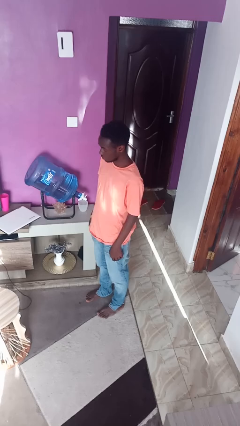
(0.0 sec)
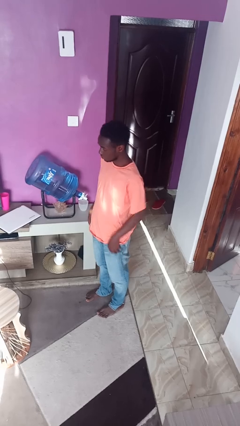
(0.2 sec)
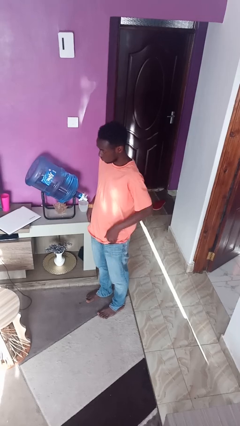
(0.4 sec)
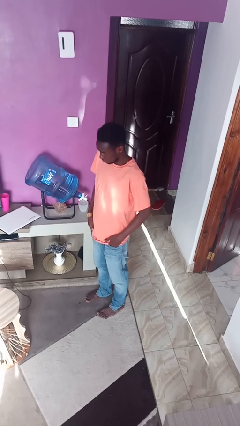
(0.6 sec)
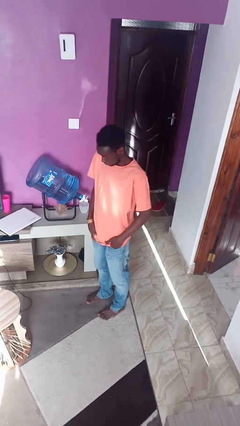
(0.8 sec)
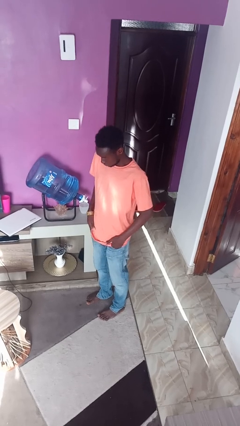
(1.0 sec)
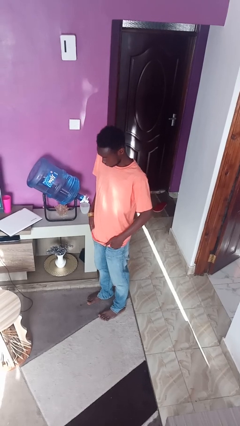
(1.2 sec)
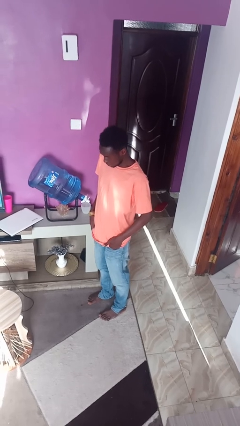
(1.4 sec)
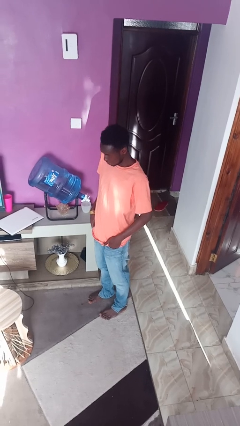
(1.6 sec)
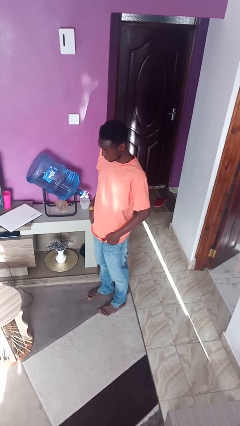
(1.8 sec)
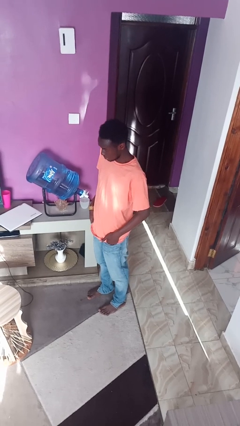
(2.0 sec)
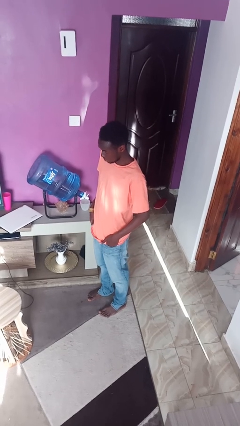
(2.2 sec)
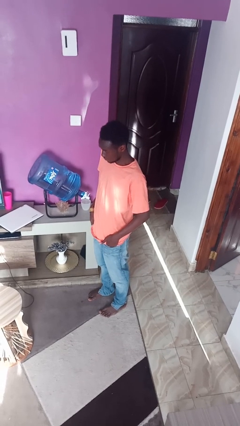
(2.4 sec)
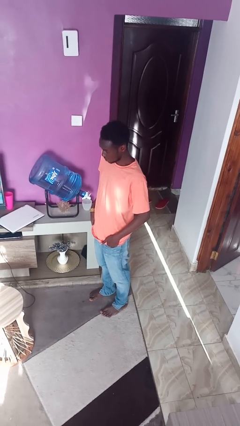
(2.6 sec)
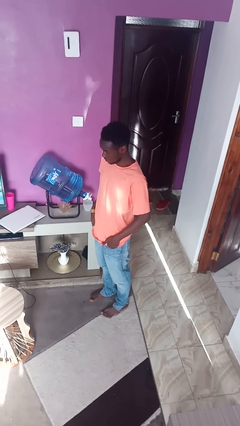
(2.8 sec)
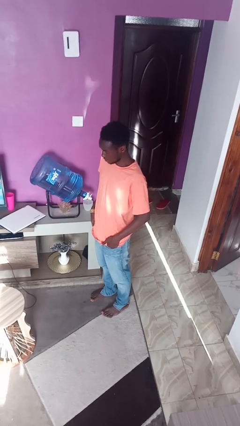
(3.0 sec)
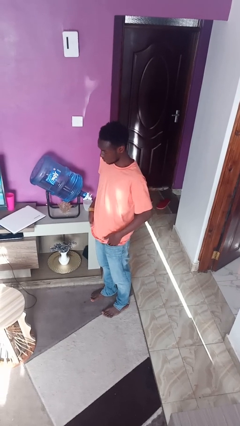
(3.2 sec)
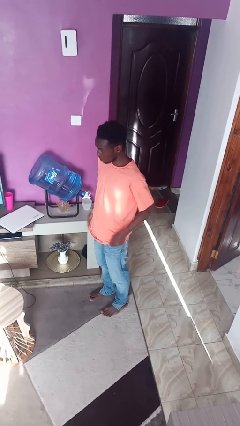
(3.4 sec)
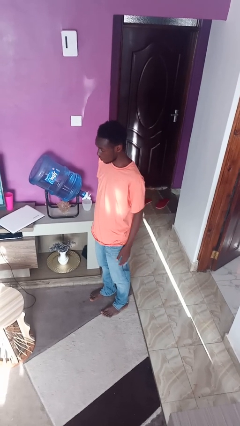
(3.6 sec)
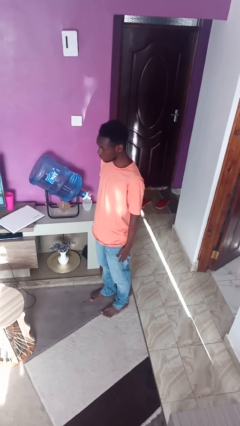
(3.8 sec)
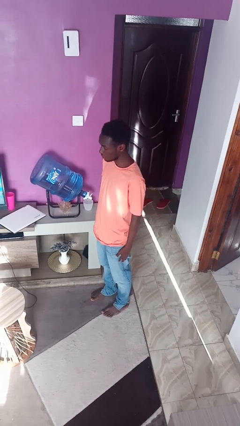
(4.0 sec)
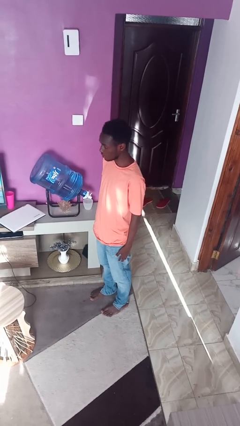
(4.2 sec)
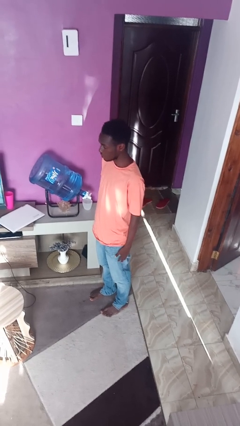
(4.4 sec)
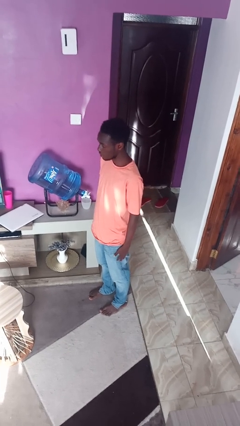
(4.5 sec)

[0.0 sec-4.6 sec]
person puts hands in back pockets

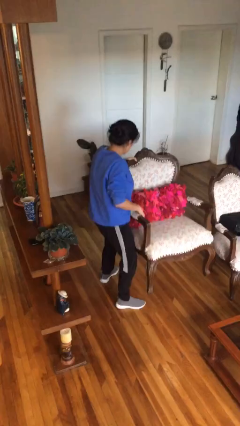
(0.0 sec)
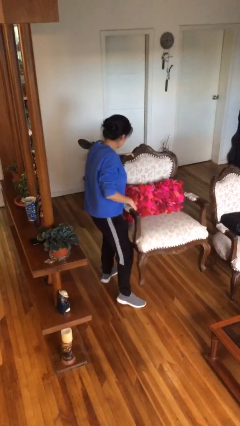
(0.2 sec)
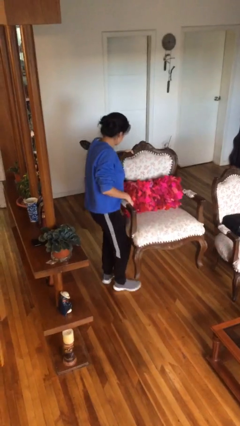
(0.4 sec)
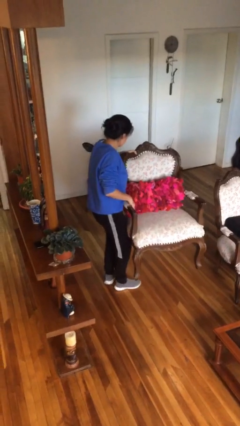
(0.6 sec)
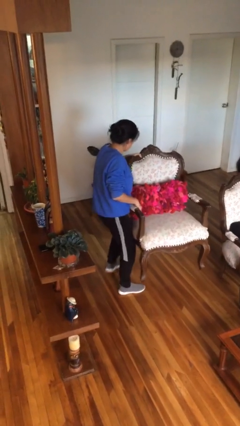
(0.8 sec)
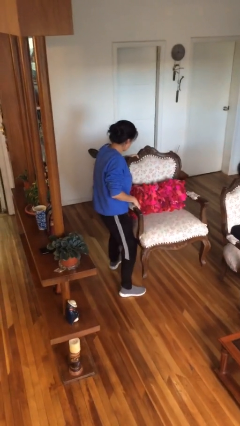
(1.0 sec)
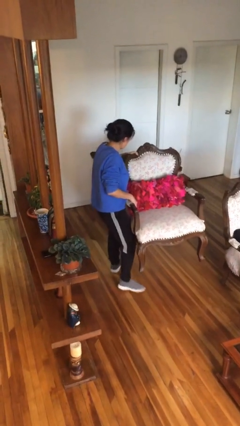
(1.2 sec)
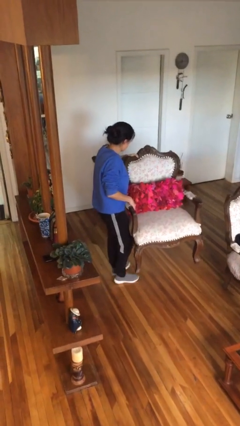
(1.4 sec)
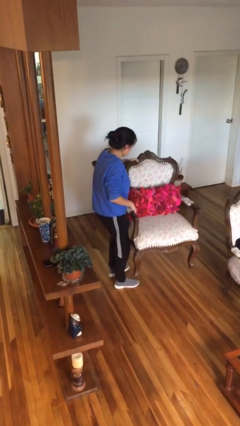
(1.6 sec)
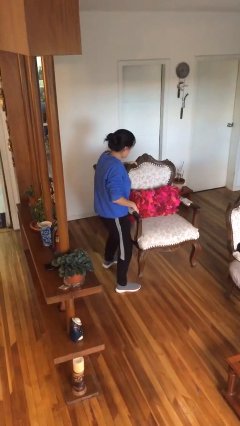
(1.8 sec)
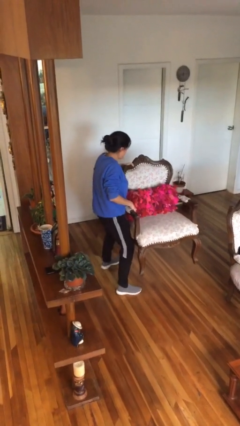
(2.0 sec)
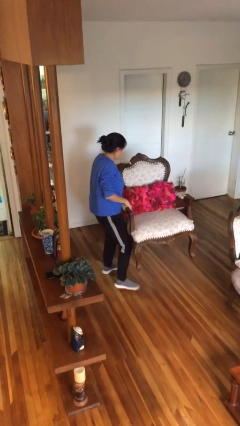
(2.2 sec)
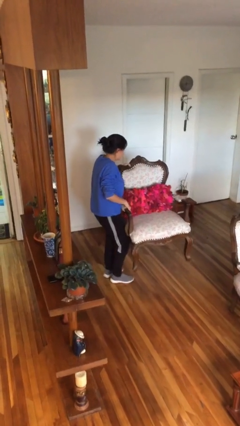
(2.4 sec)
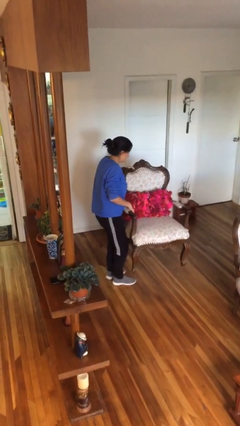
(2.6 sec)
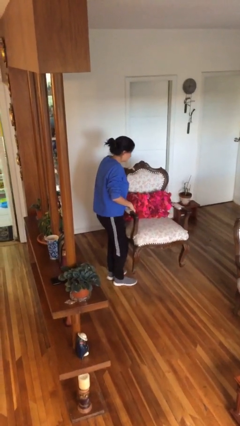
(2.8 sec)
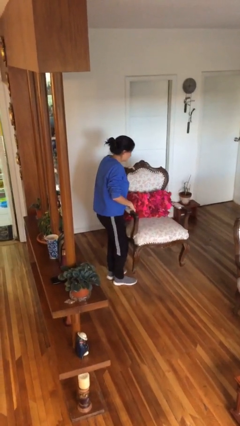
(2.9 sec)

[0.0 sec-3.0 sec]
person carries furniture

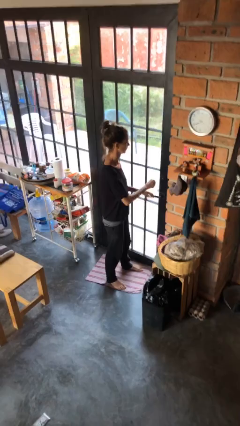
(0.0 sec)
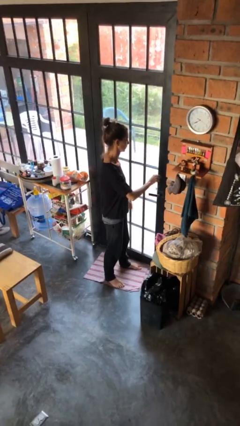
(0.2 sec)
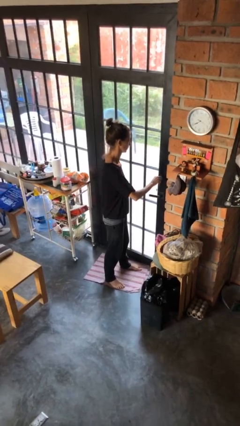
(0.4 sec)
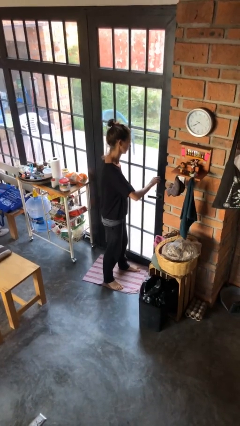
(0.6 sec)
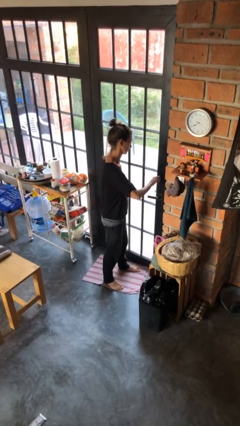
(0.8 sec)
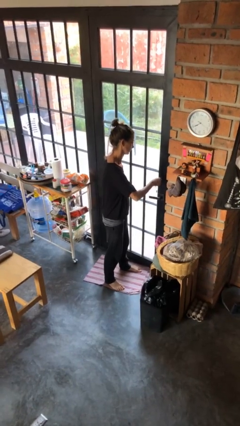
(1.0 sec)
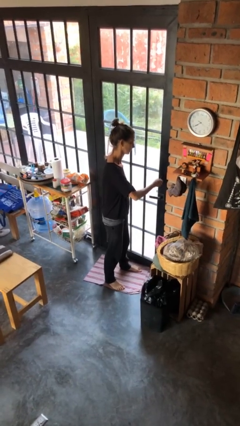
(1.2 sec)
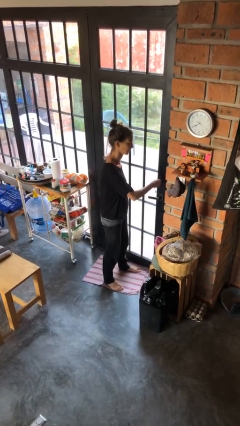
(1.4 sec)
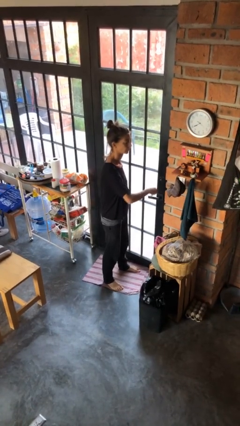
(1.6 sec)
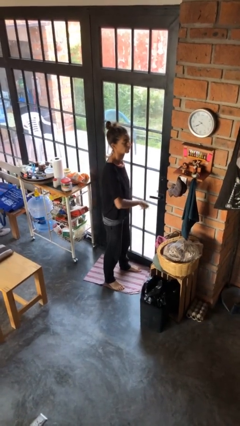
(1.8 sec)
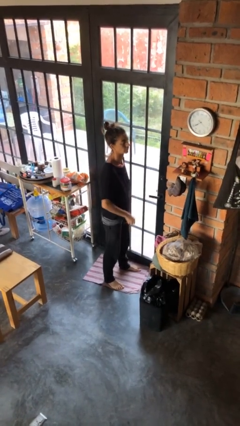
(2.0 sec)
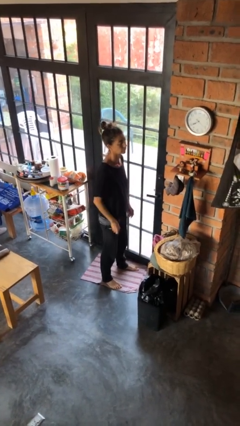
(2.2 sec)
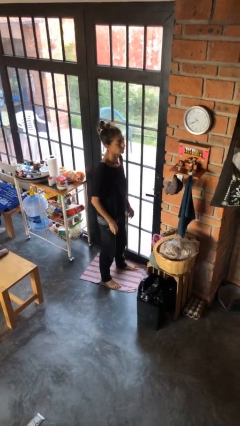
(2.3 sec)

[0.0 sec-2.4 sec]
person locks door with keys

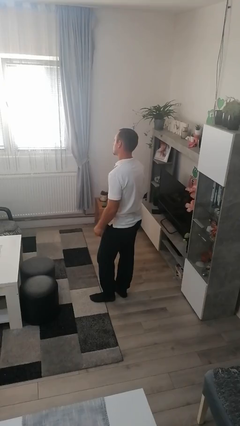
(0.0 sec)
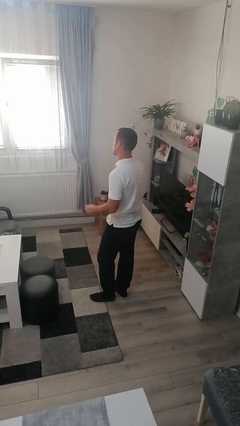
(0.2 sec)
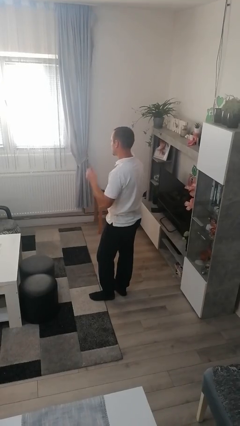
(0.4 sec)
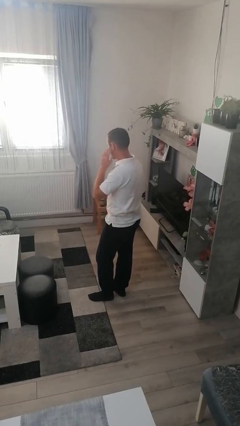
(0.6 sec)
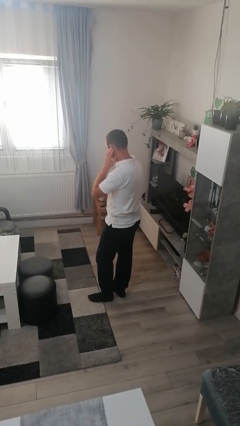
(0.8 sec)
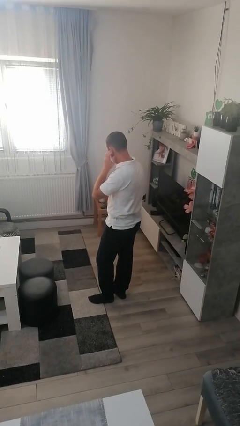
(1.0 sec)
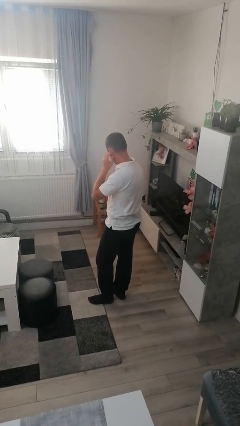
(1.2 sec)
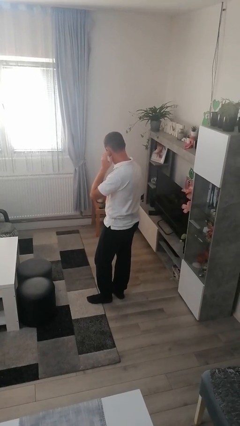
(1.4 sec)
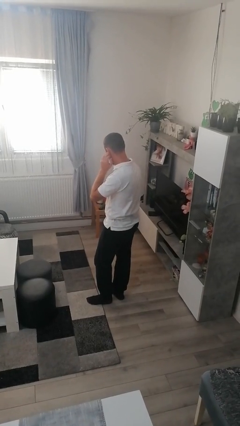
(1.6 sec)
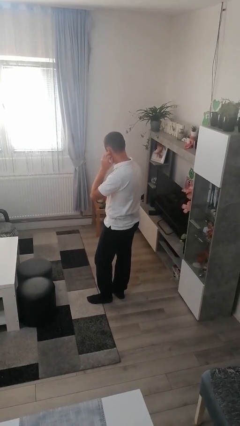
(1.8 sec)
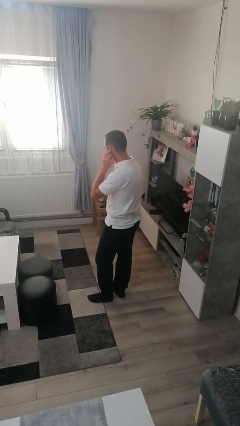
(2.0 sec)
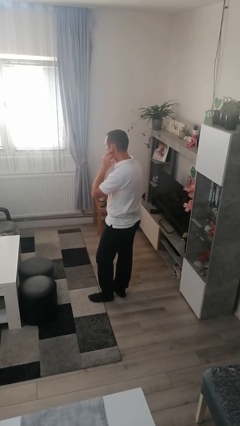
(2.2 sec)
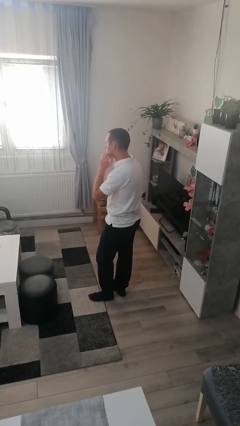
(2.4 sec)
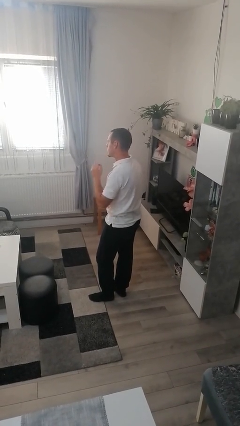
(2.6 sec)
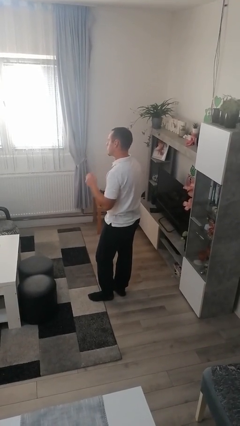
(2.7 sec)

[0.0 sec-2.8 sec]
person touches earlobe

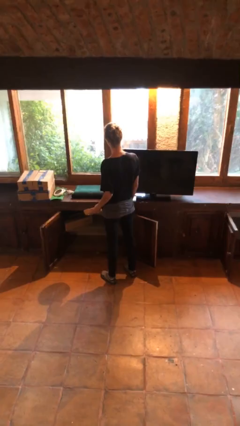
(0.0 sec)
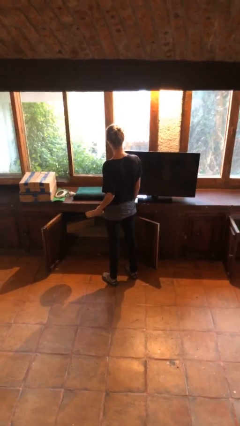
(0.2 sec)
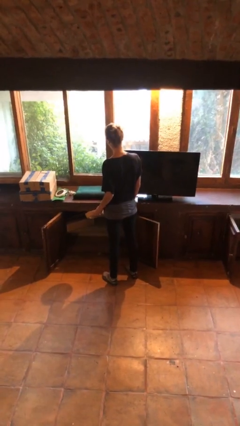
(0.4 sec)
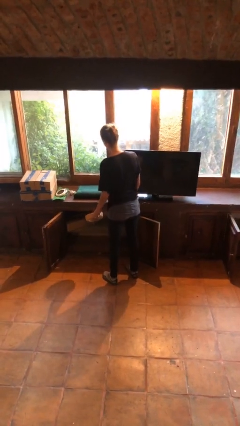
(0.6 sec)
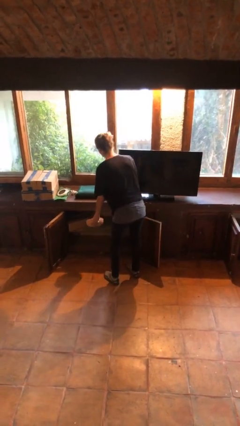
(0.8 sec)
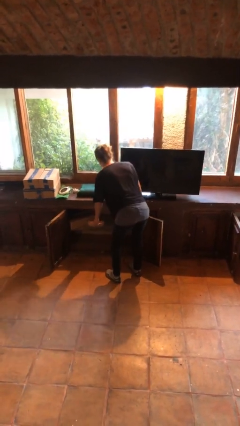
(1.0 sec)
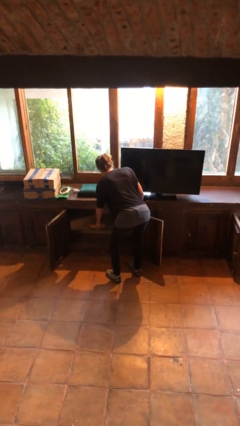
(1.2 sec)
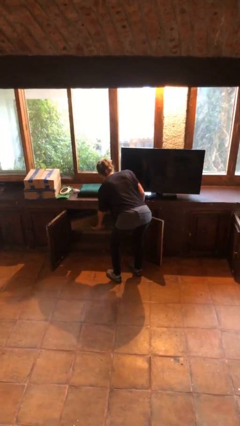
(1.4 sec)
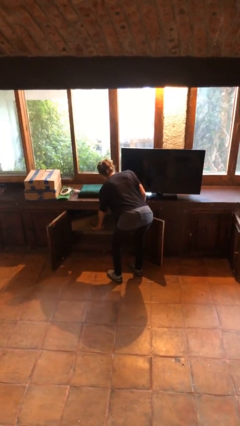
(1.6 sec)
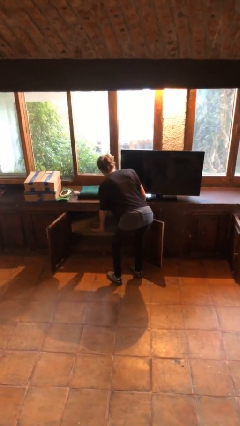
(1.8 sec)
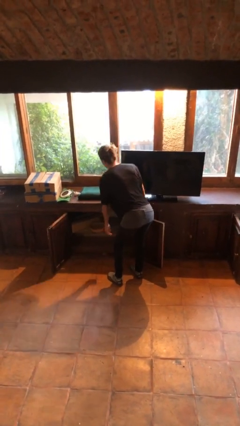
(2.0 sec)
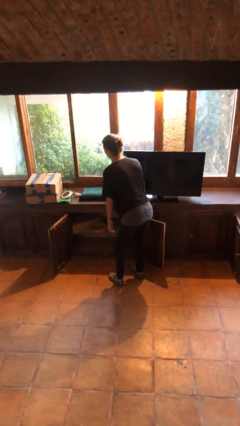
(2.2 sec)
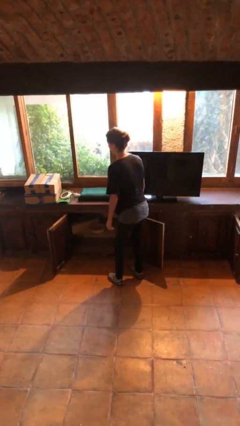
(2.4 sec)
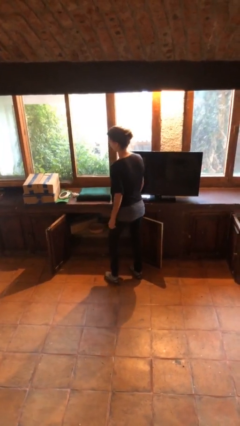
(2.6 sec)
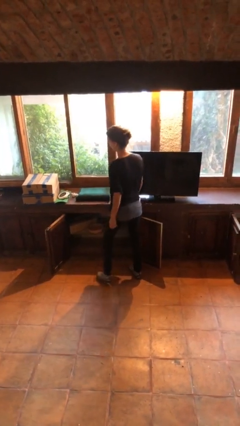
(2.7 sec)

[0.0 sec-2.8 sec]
person puts down object into cabinet

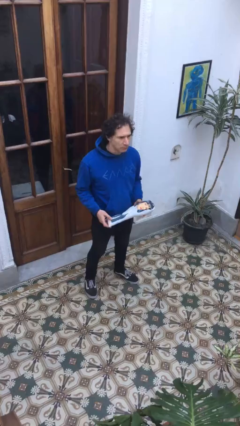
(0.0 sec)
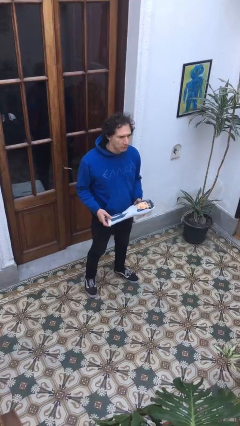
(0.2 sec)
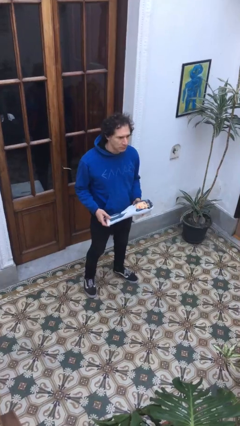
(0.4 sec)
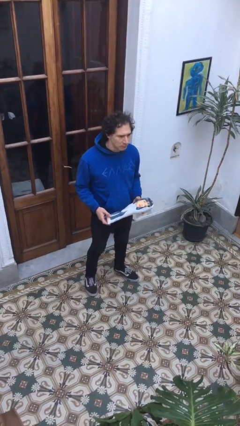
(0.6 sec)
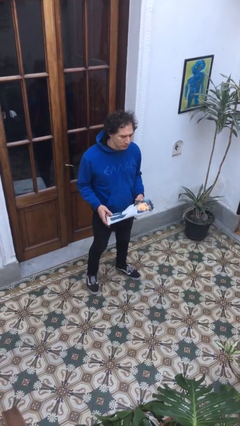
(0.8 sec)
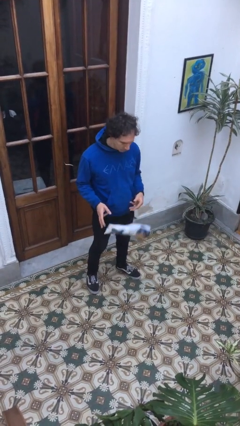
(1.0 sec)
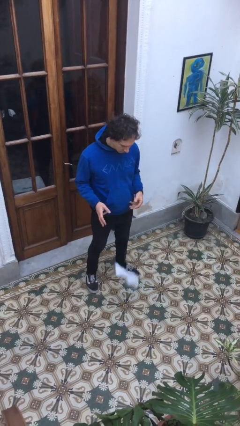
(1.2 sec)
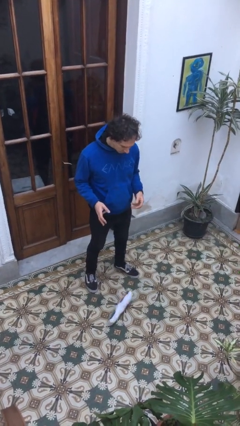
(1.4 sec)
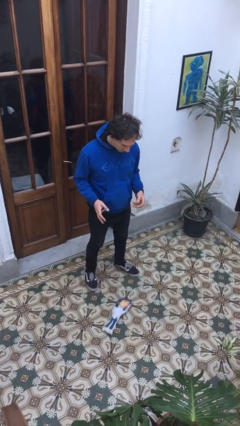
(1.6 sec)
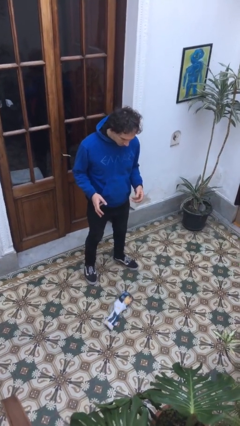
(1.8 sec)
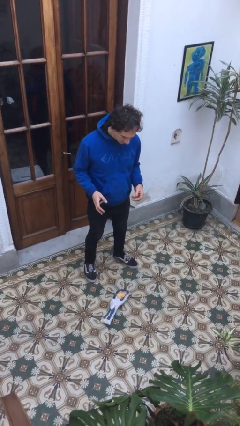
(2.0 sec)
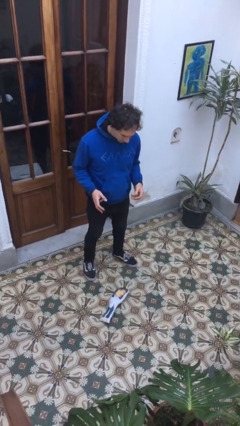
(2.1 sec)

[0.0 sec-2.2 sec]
person drops object
